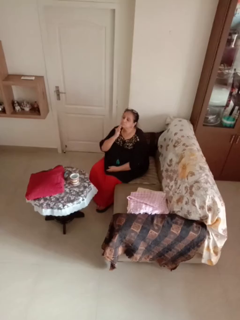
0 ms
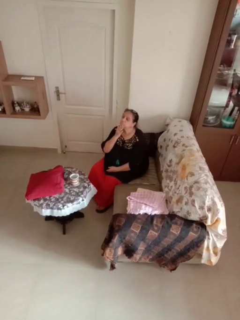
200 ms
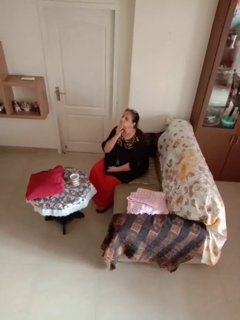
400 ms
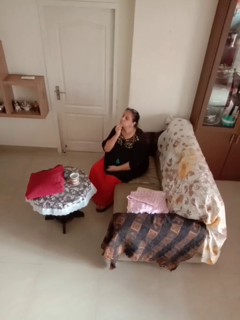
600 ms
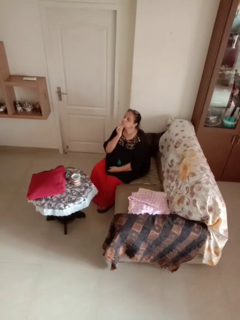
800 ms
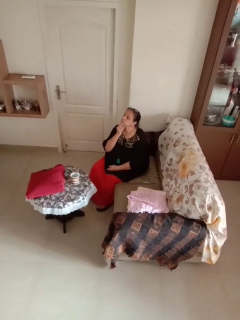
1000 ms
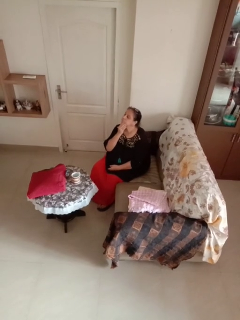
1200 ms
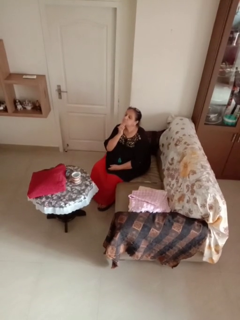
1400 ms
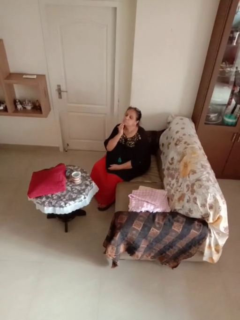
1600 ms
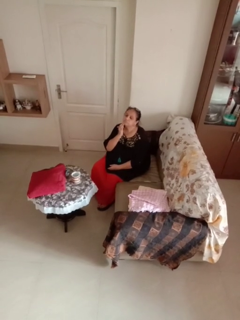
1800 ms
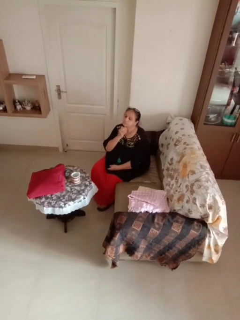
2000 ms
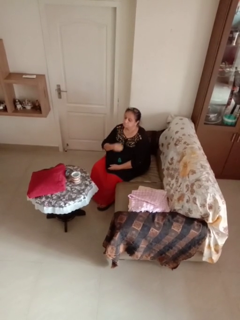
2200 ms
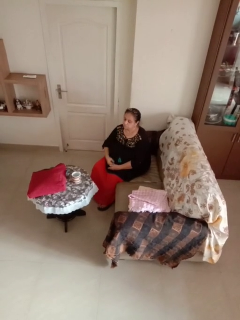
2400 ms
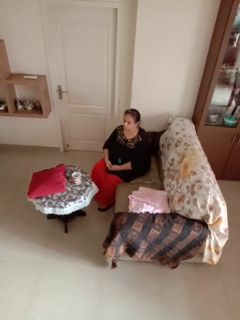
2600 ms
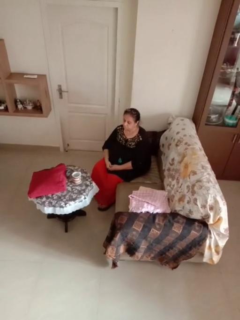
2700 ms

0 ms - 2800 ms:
person strokes chin

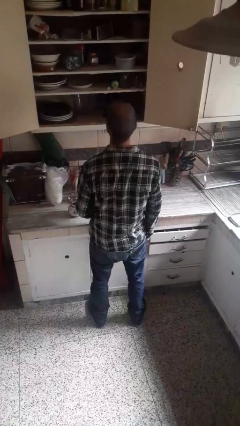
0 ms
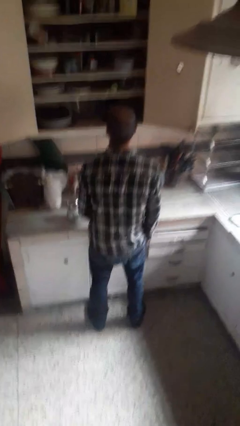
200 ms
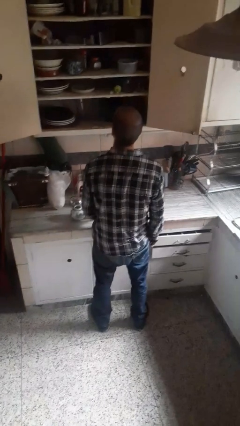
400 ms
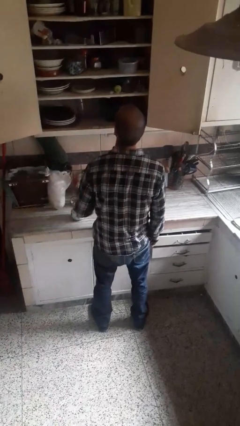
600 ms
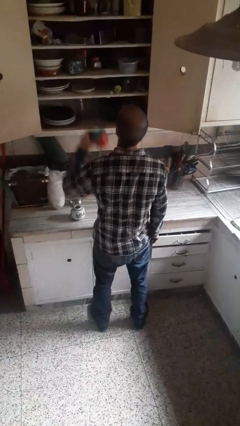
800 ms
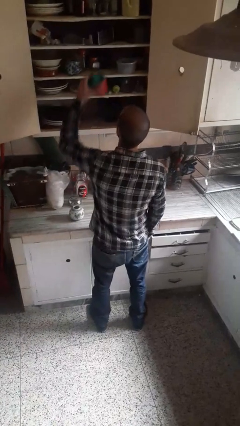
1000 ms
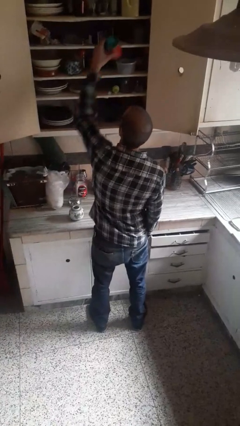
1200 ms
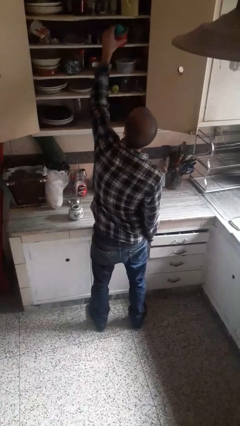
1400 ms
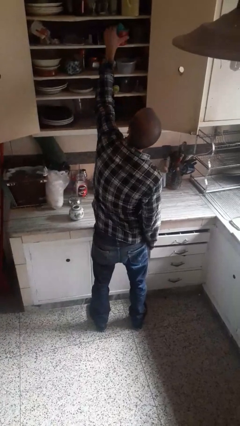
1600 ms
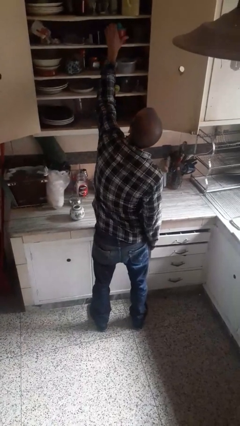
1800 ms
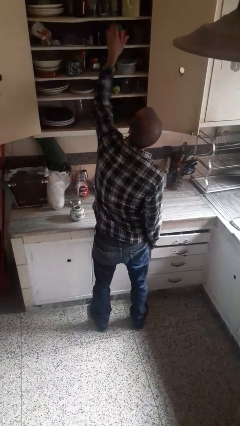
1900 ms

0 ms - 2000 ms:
person puts object in cabinet

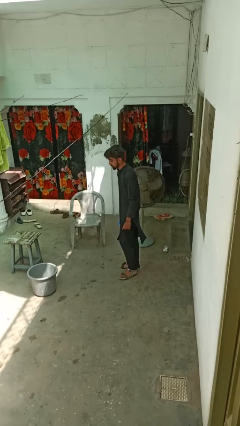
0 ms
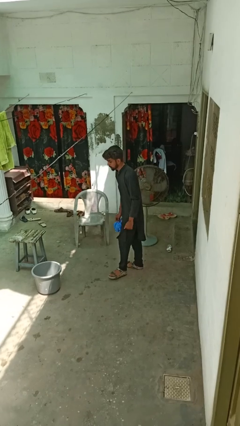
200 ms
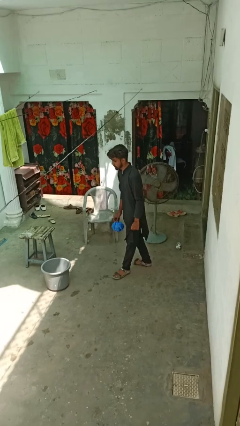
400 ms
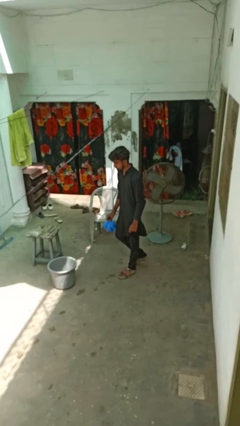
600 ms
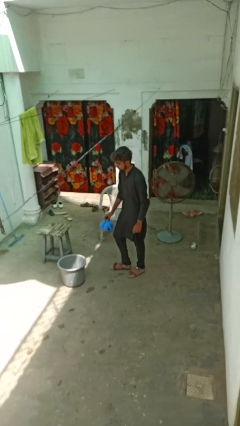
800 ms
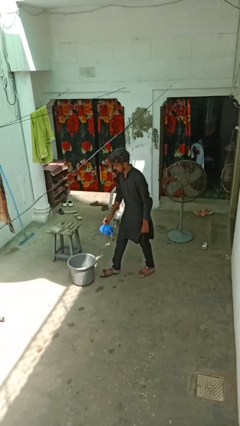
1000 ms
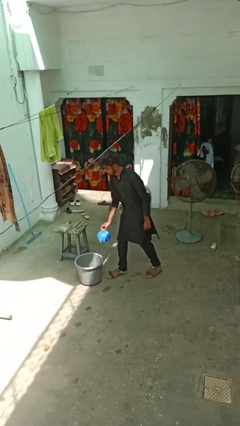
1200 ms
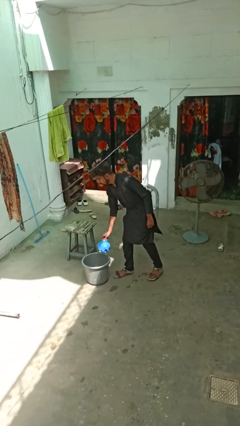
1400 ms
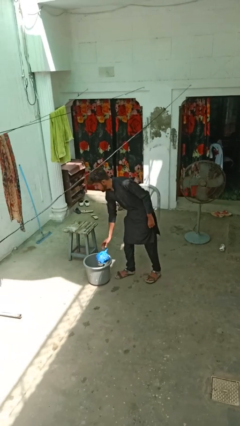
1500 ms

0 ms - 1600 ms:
person discards trash

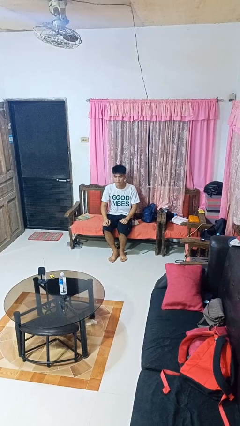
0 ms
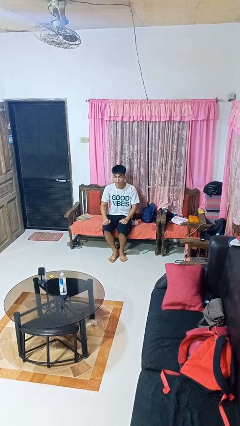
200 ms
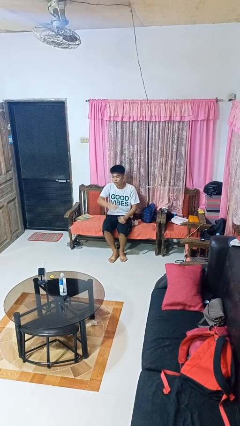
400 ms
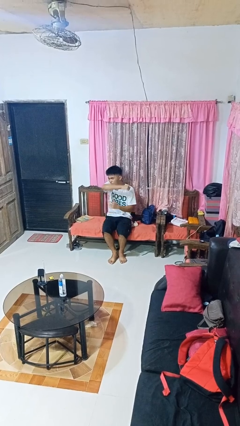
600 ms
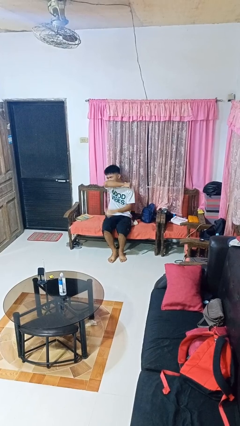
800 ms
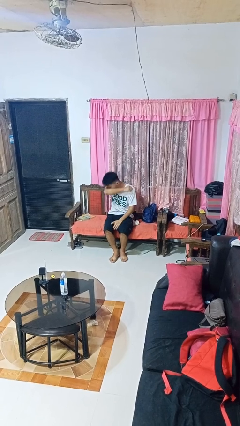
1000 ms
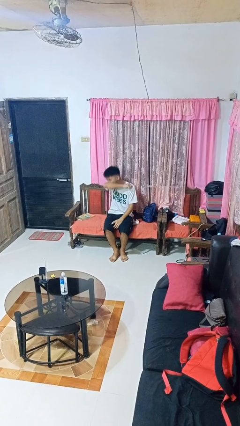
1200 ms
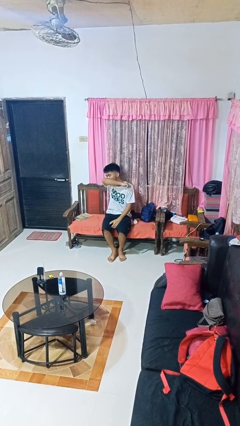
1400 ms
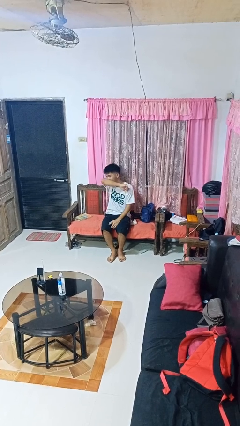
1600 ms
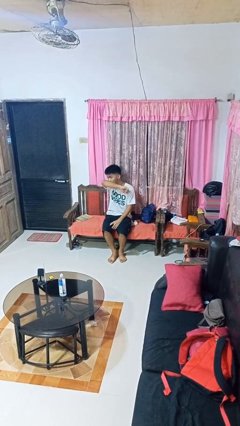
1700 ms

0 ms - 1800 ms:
person sneezes into arm

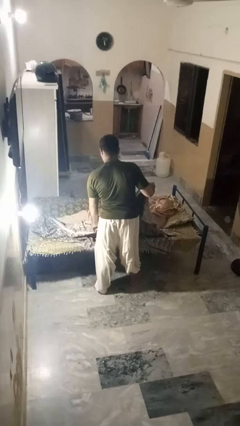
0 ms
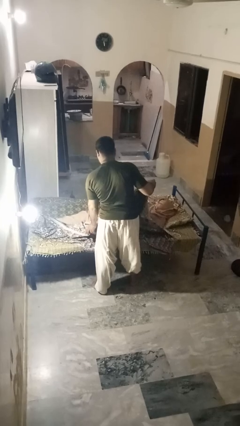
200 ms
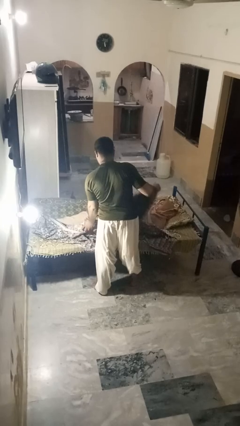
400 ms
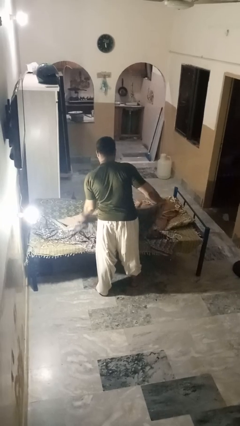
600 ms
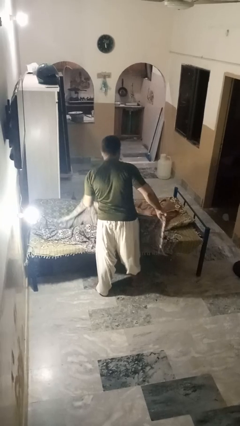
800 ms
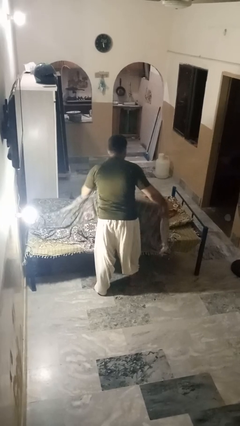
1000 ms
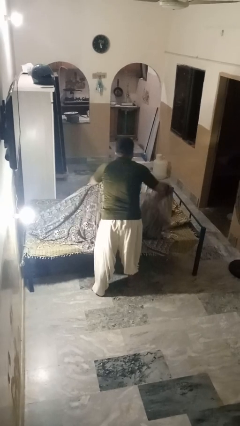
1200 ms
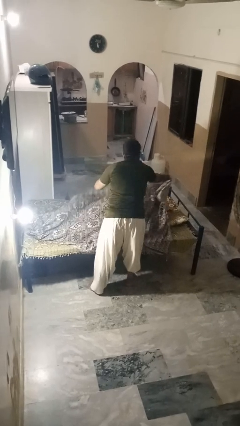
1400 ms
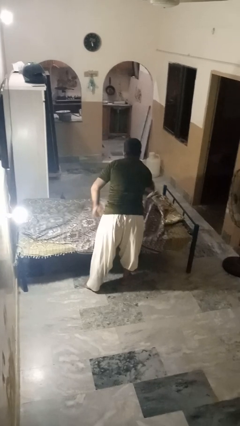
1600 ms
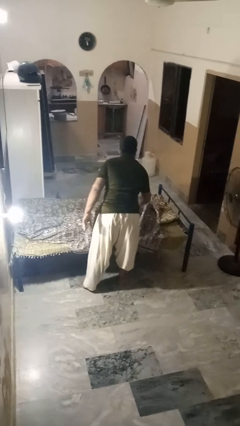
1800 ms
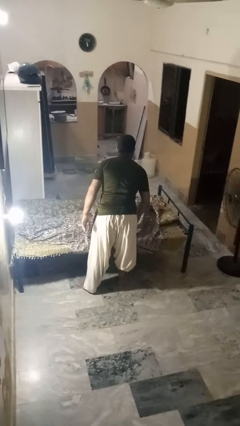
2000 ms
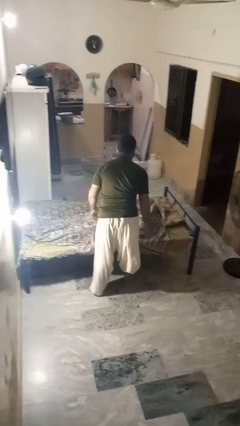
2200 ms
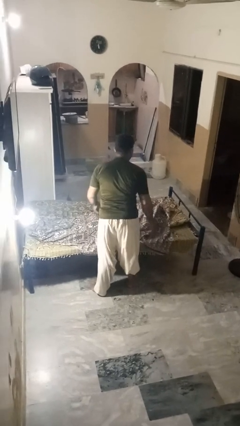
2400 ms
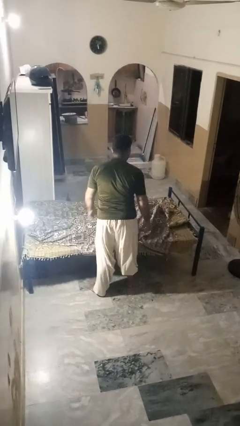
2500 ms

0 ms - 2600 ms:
person covers friend with blanket

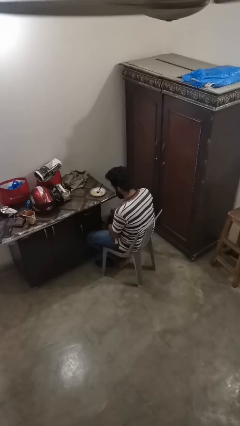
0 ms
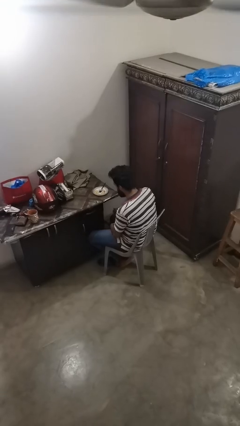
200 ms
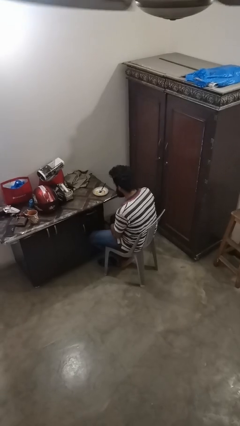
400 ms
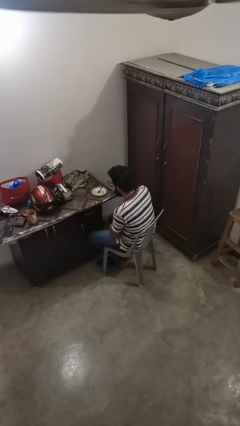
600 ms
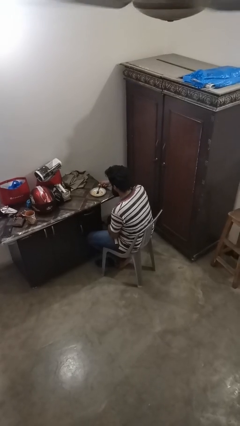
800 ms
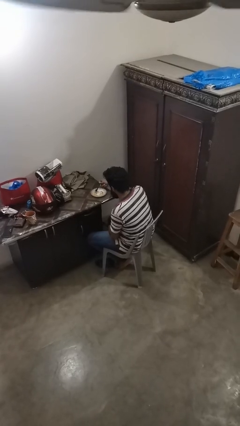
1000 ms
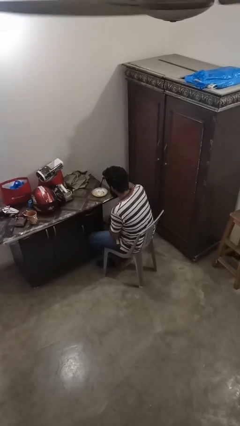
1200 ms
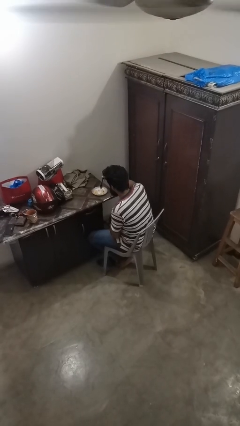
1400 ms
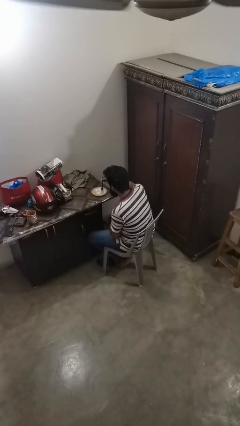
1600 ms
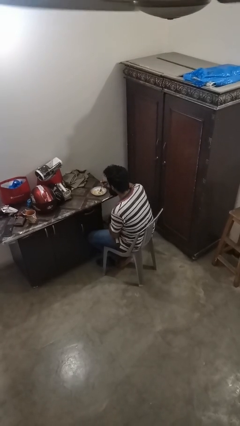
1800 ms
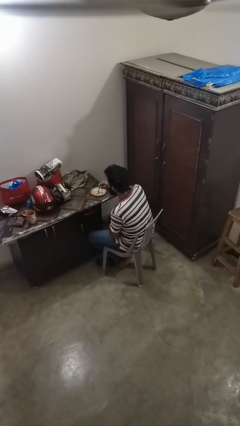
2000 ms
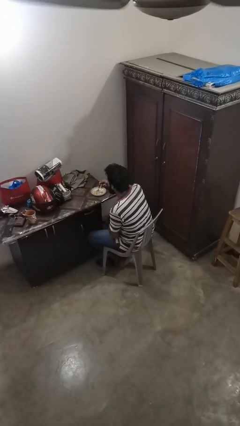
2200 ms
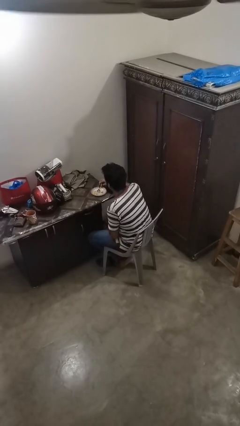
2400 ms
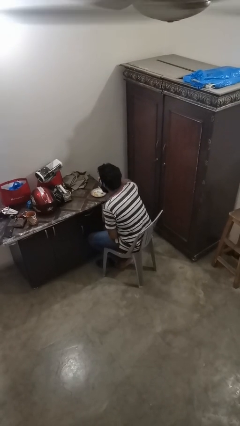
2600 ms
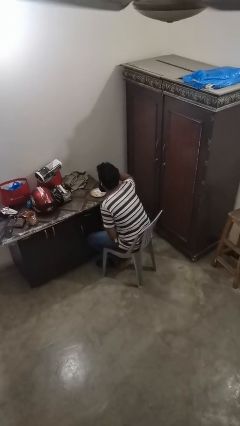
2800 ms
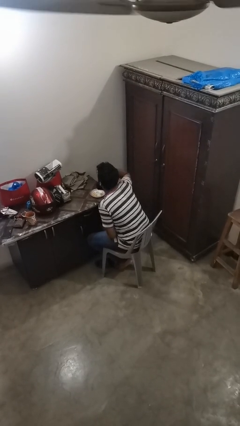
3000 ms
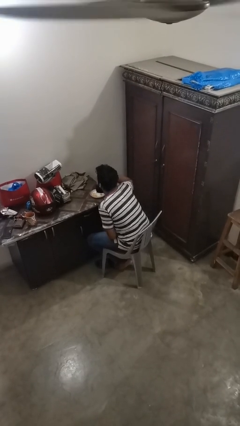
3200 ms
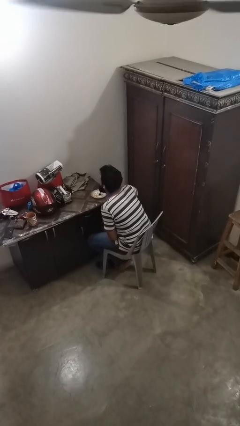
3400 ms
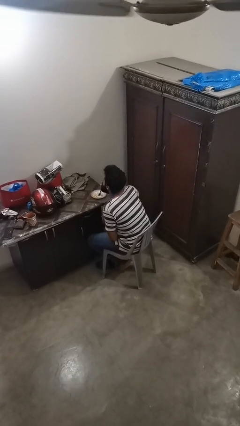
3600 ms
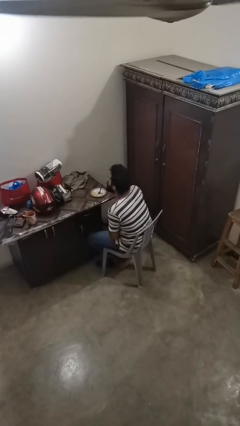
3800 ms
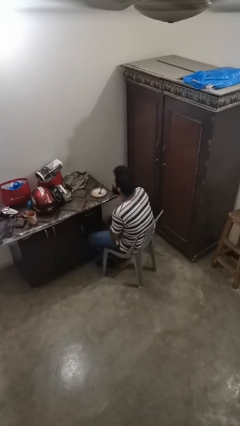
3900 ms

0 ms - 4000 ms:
person eats with utensil

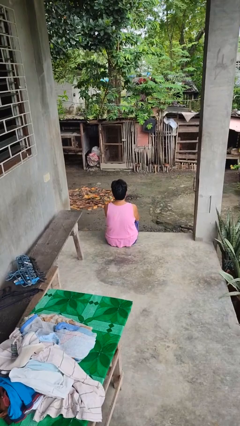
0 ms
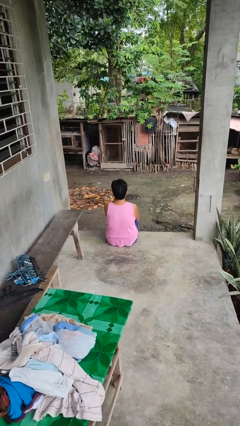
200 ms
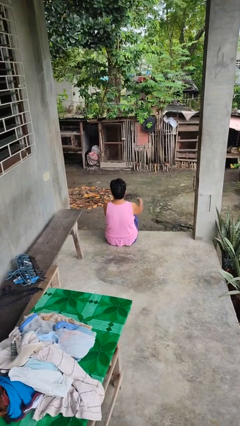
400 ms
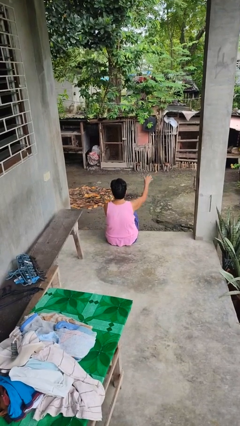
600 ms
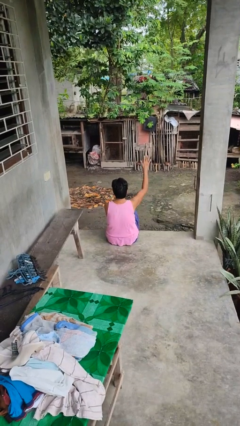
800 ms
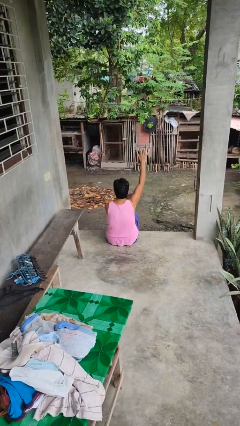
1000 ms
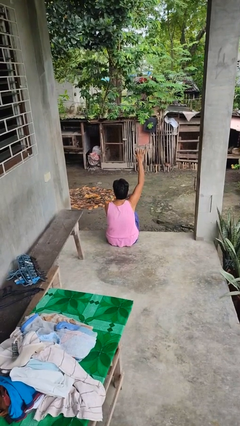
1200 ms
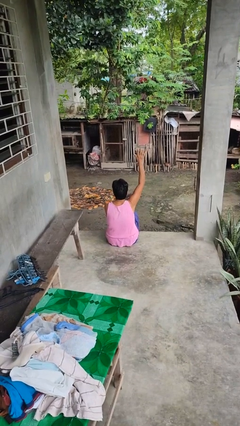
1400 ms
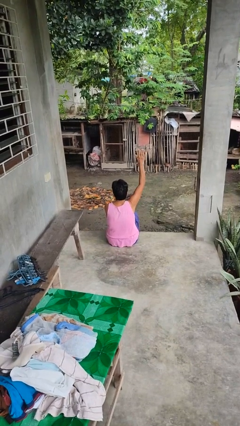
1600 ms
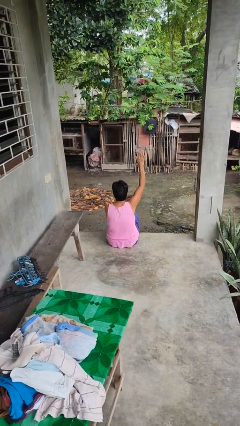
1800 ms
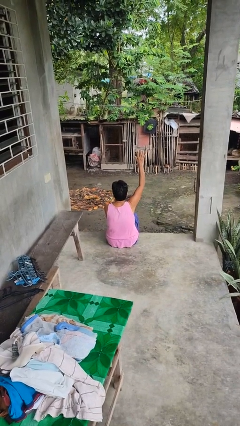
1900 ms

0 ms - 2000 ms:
person gestures raise hand

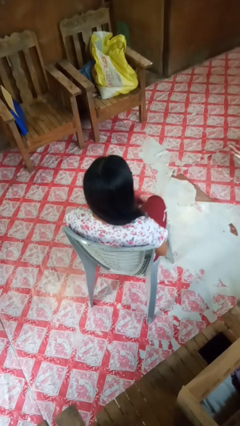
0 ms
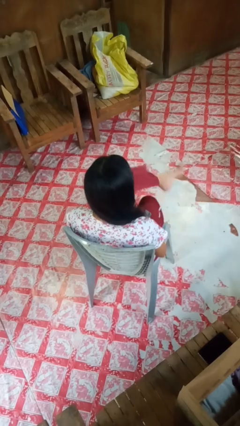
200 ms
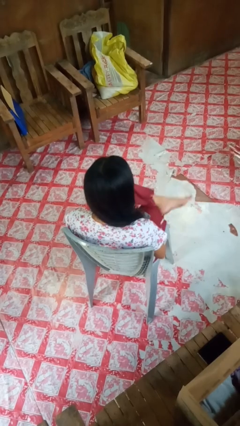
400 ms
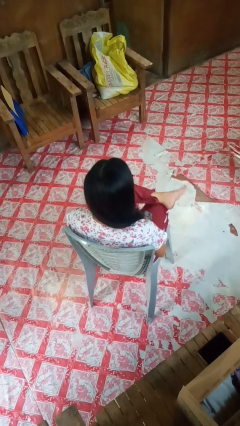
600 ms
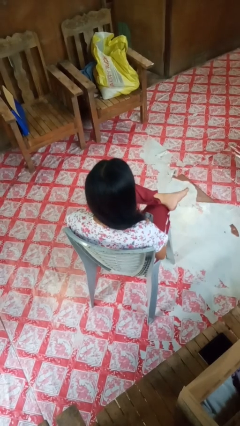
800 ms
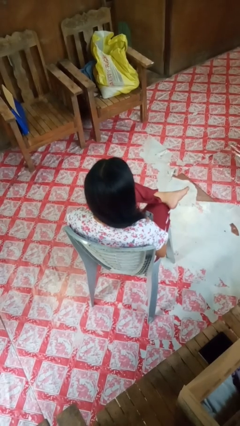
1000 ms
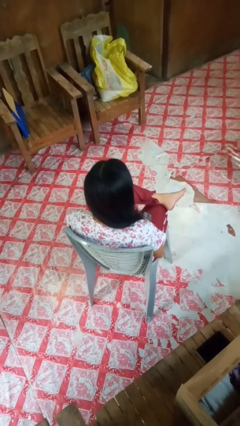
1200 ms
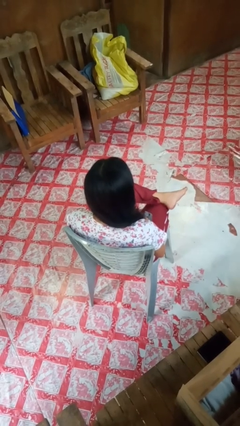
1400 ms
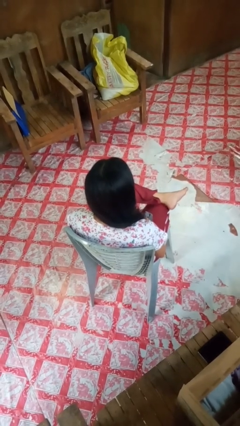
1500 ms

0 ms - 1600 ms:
person crosses legs
